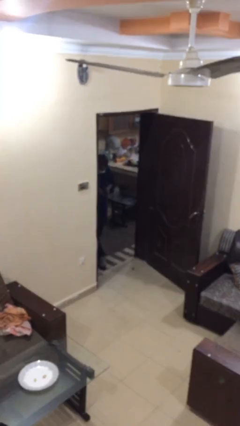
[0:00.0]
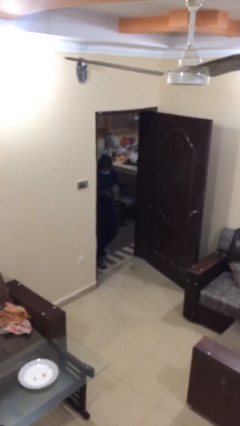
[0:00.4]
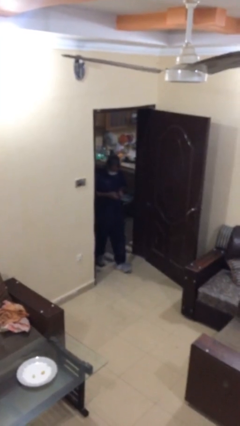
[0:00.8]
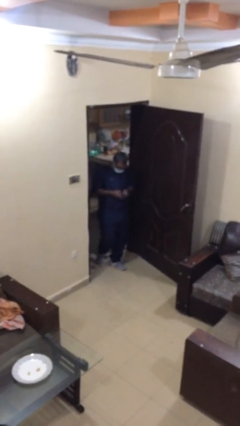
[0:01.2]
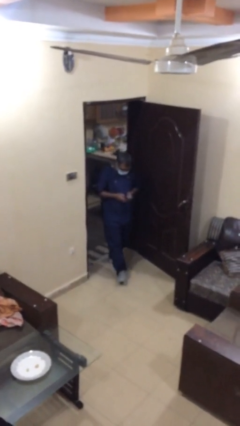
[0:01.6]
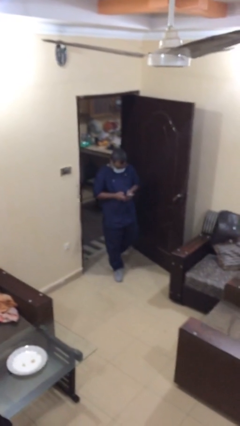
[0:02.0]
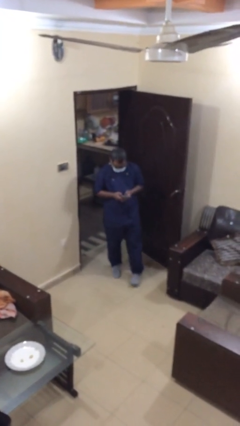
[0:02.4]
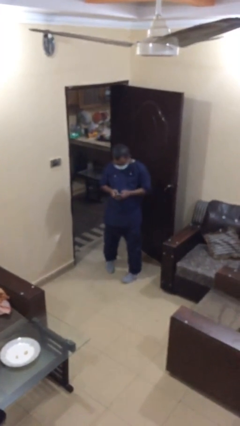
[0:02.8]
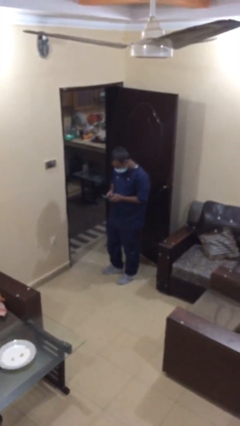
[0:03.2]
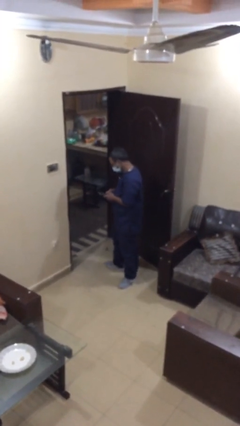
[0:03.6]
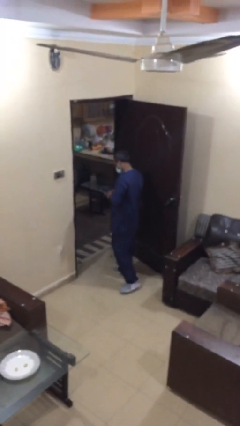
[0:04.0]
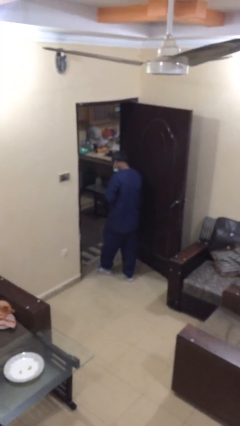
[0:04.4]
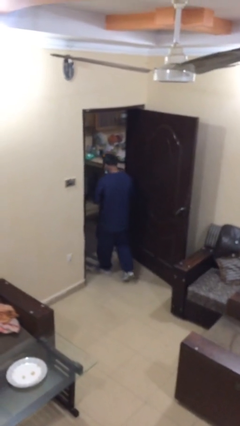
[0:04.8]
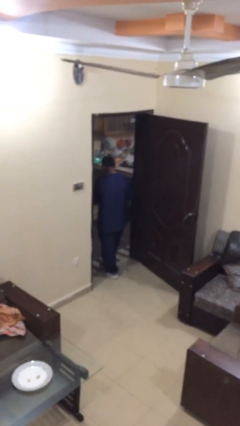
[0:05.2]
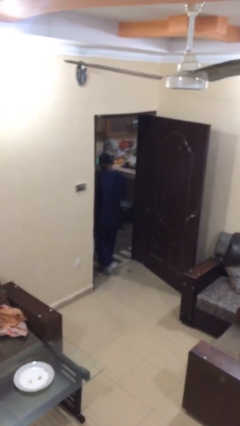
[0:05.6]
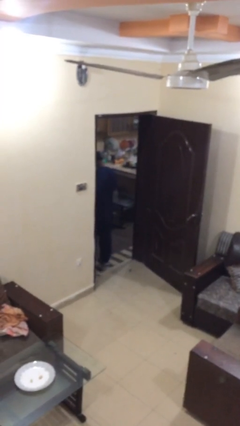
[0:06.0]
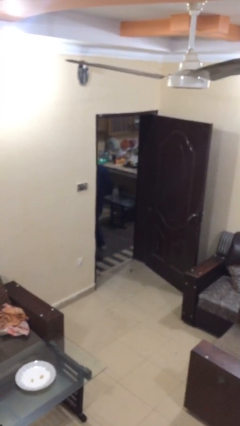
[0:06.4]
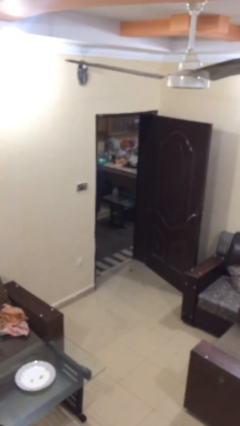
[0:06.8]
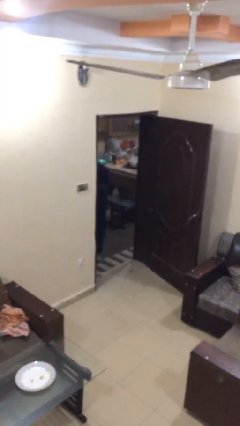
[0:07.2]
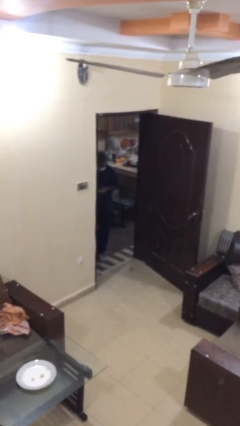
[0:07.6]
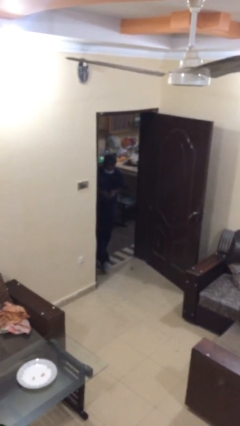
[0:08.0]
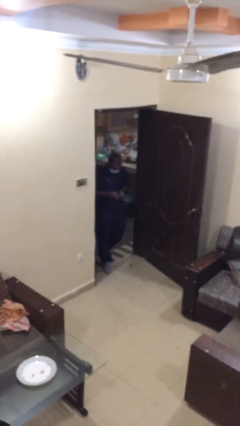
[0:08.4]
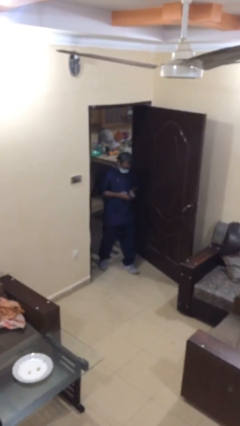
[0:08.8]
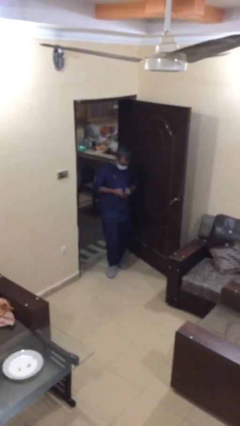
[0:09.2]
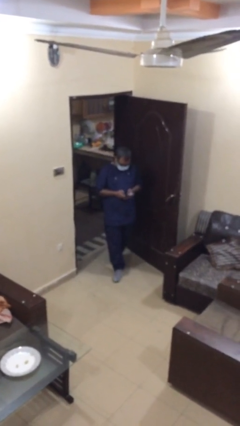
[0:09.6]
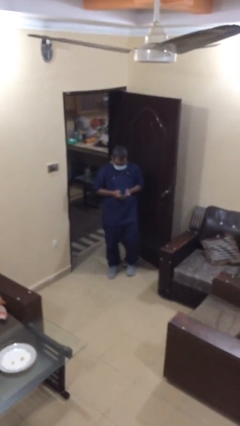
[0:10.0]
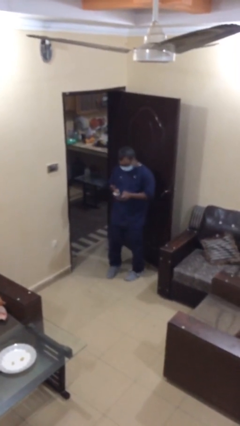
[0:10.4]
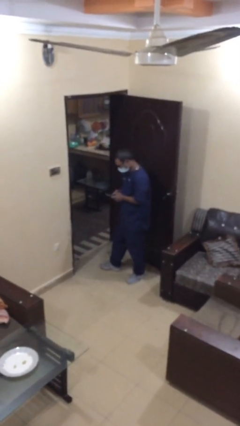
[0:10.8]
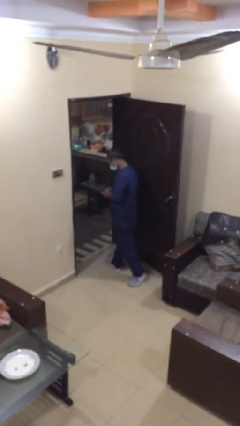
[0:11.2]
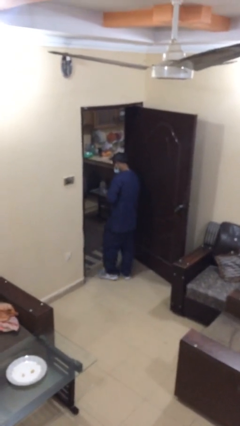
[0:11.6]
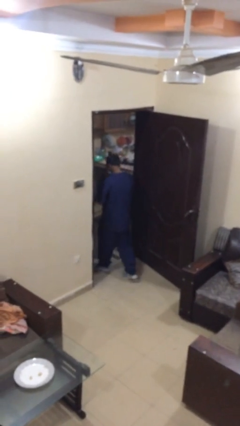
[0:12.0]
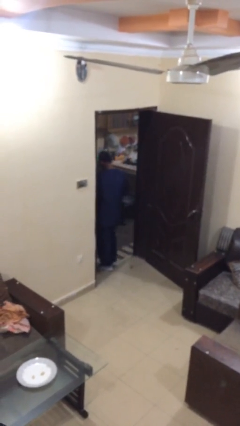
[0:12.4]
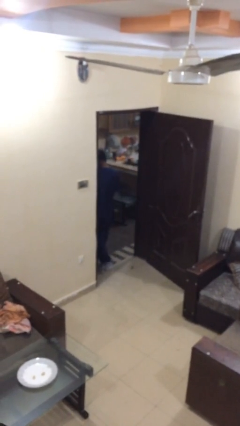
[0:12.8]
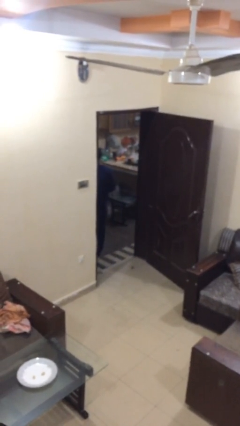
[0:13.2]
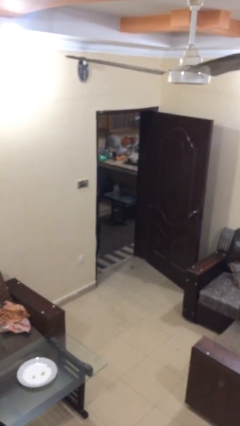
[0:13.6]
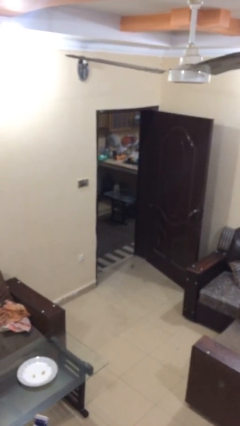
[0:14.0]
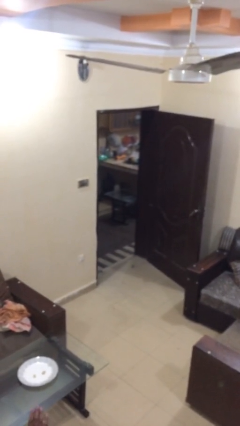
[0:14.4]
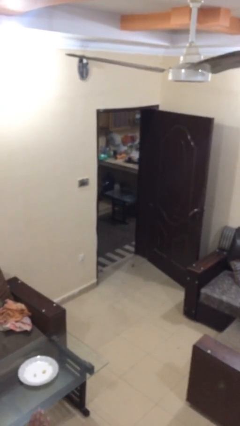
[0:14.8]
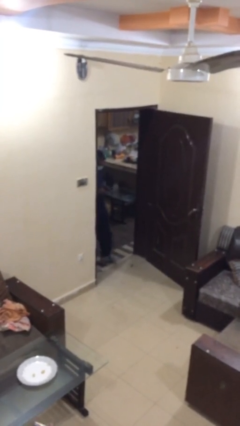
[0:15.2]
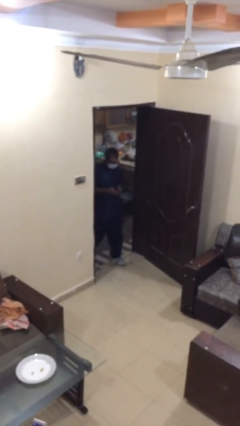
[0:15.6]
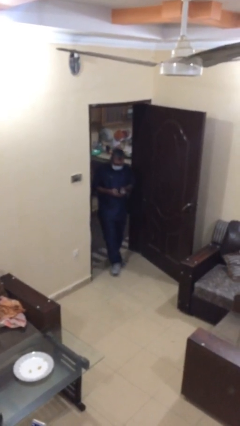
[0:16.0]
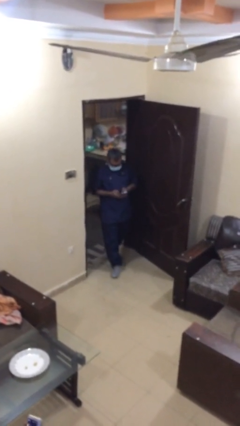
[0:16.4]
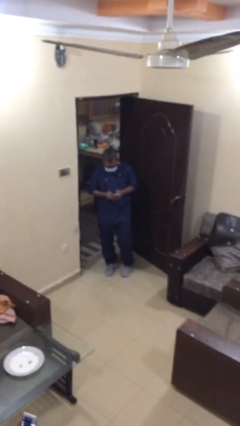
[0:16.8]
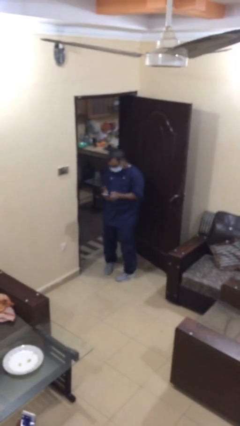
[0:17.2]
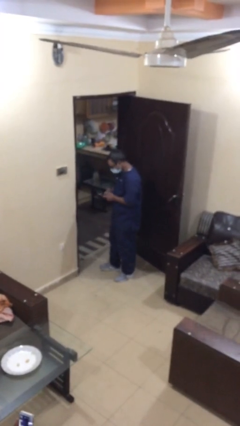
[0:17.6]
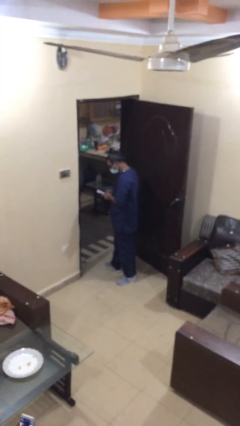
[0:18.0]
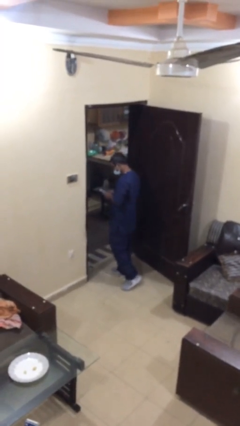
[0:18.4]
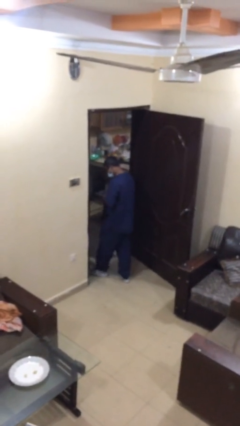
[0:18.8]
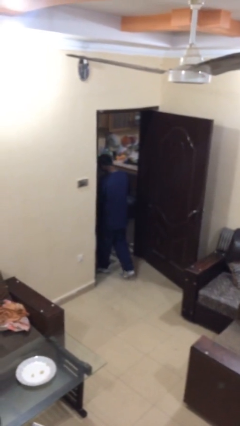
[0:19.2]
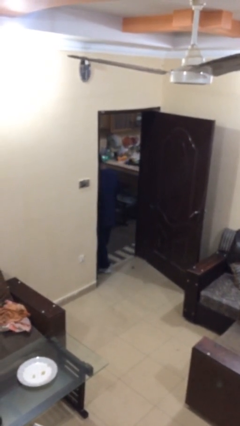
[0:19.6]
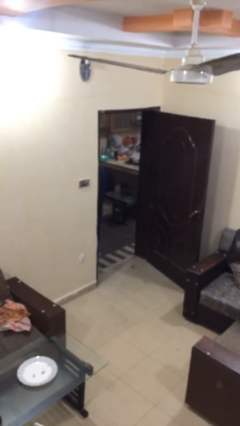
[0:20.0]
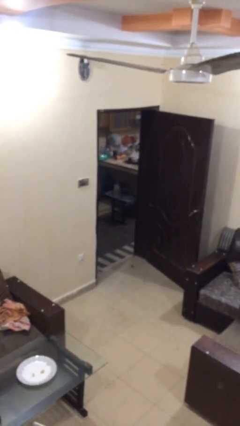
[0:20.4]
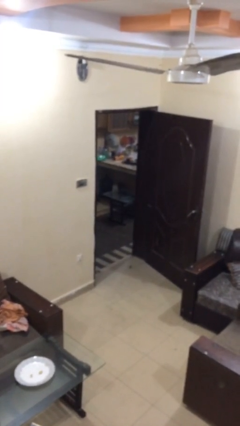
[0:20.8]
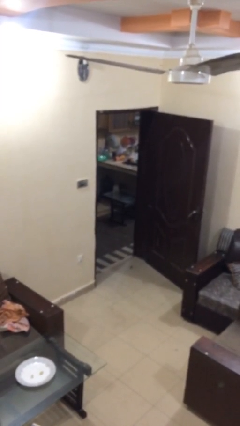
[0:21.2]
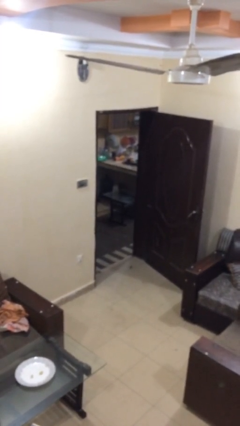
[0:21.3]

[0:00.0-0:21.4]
person texts on phone

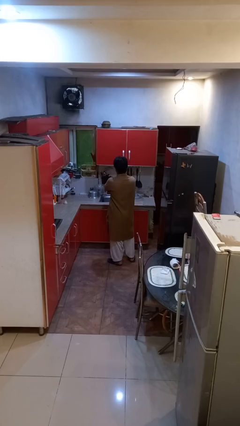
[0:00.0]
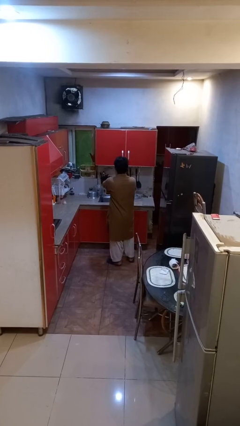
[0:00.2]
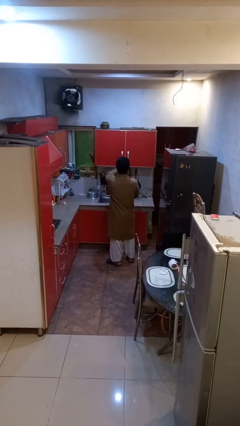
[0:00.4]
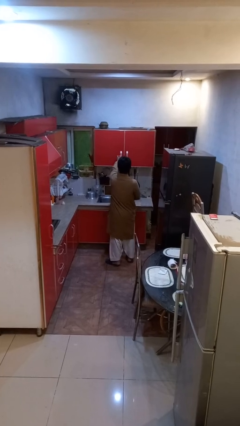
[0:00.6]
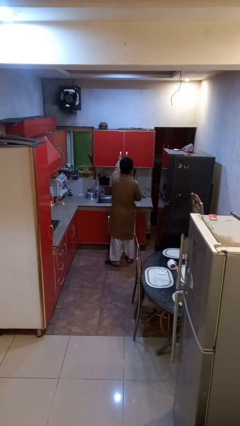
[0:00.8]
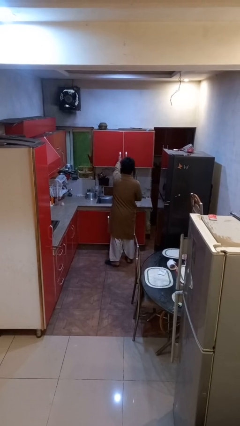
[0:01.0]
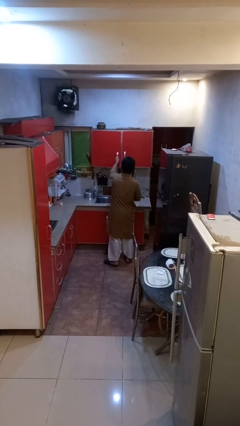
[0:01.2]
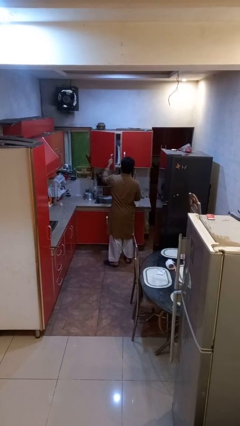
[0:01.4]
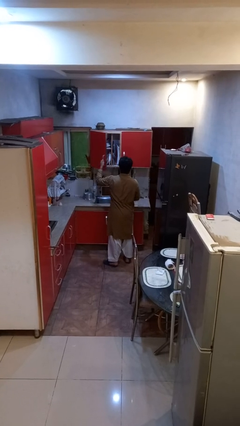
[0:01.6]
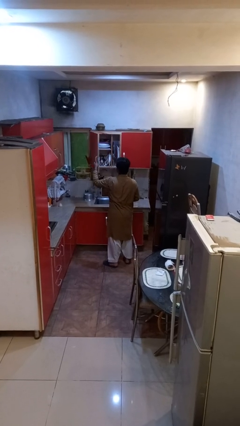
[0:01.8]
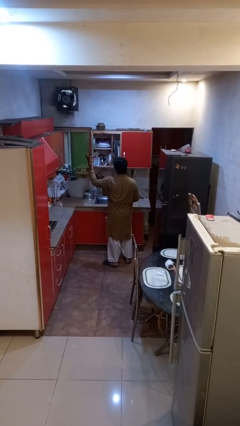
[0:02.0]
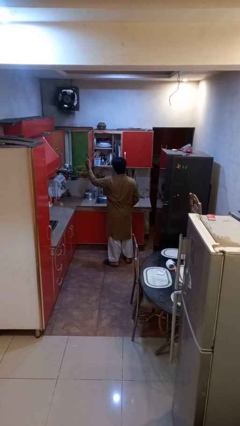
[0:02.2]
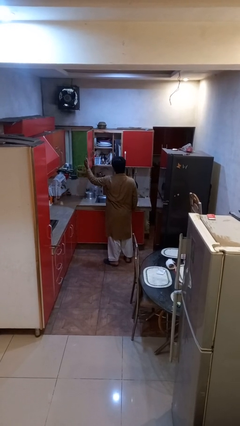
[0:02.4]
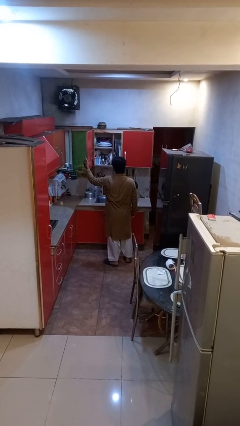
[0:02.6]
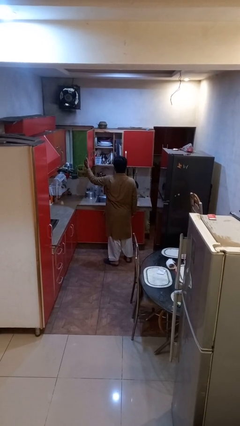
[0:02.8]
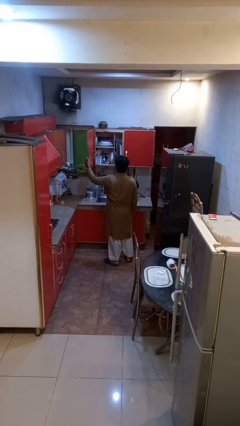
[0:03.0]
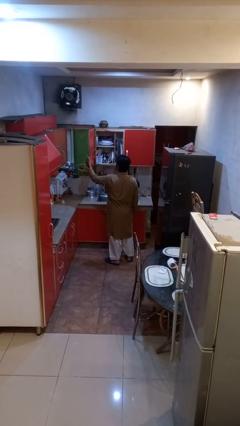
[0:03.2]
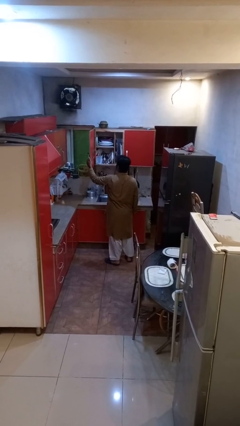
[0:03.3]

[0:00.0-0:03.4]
person opens cabinet

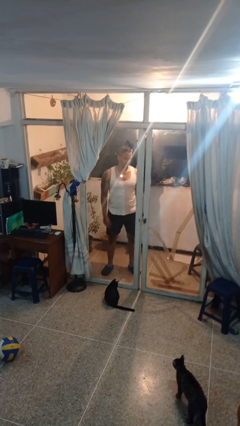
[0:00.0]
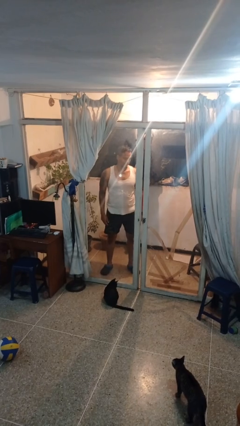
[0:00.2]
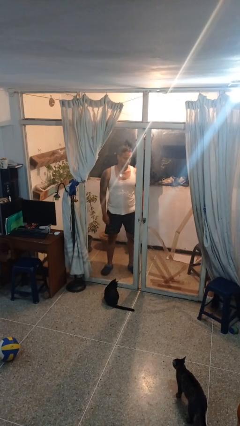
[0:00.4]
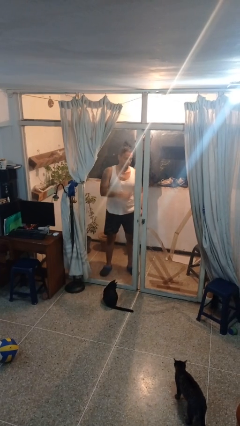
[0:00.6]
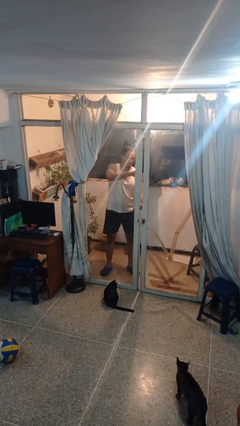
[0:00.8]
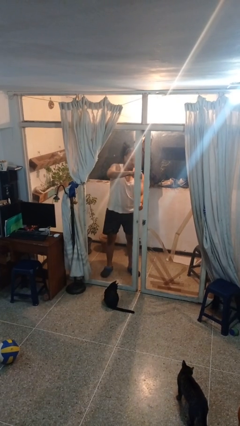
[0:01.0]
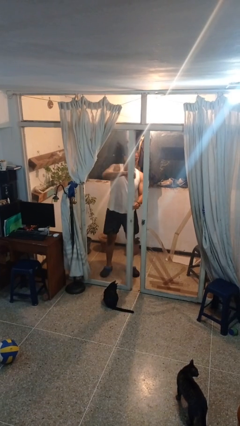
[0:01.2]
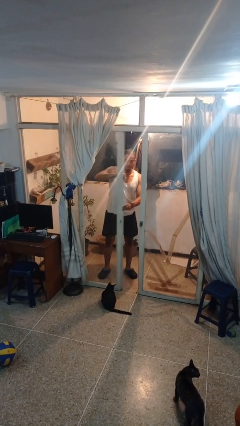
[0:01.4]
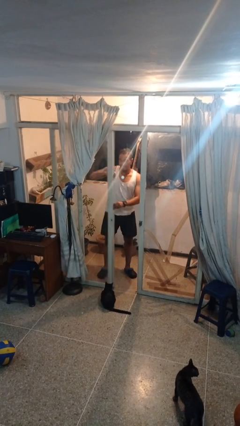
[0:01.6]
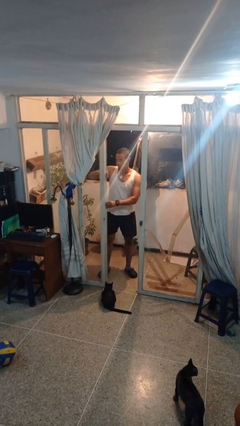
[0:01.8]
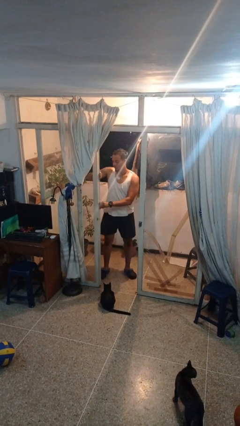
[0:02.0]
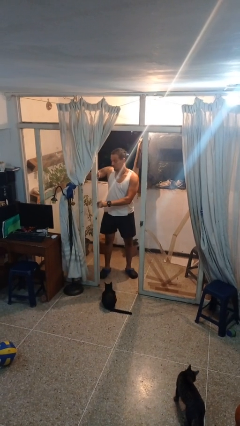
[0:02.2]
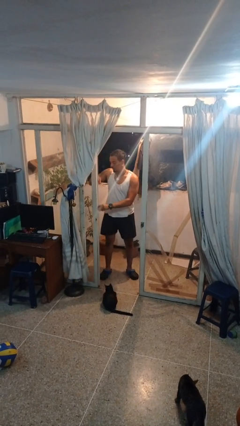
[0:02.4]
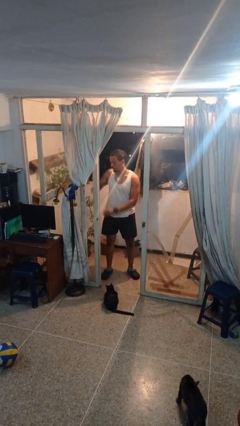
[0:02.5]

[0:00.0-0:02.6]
person opens sliding door

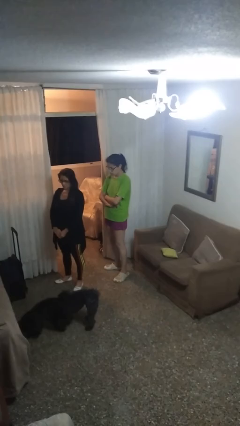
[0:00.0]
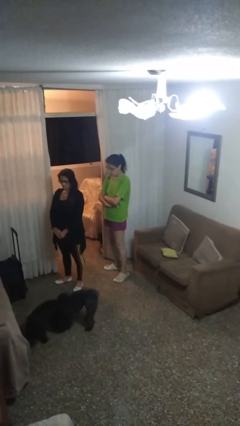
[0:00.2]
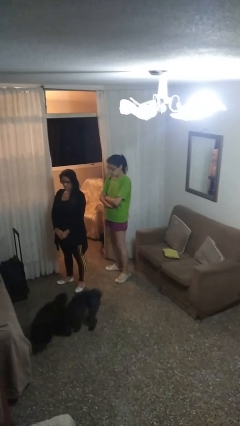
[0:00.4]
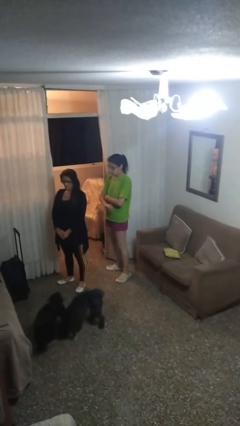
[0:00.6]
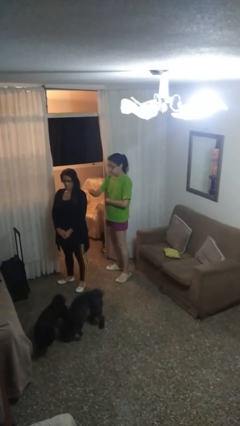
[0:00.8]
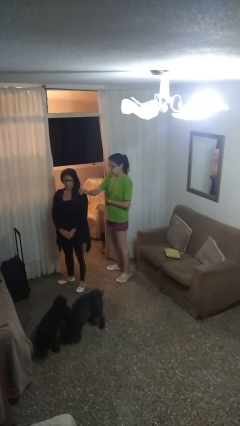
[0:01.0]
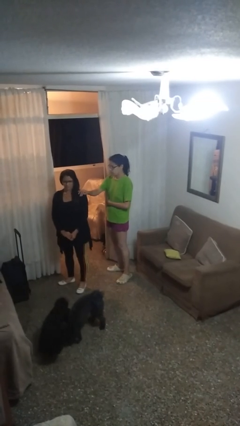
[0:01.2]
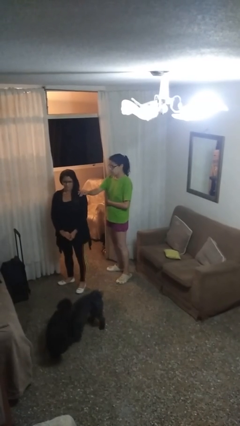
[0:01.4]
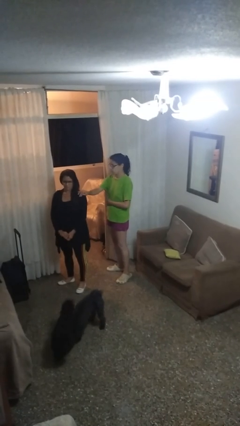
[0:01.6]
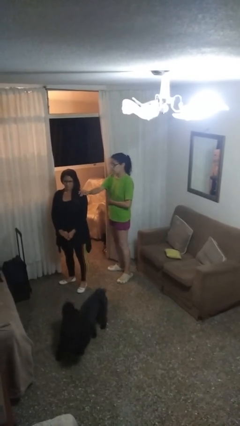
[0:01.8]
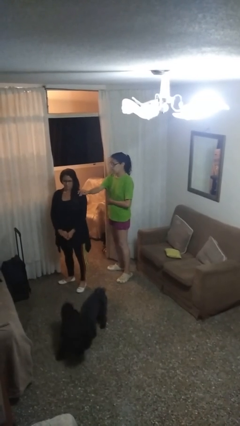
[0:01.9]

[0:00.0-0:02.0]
person grabs person by shoulder
